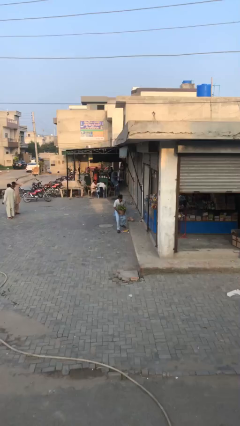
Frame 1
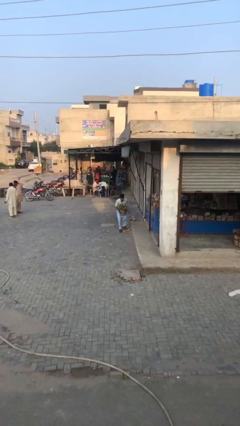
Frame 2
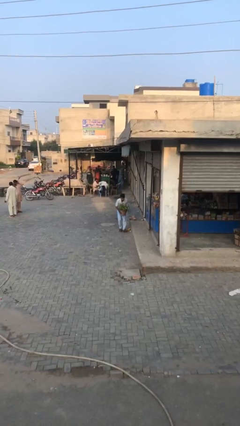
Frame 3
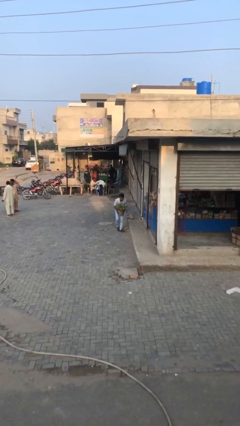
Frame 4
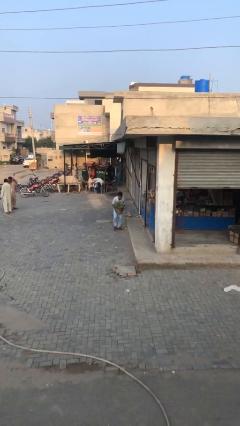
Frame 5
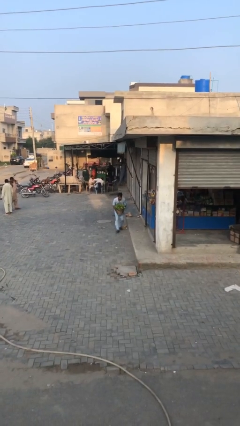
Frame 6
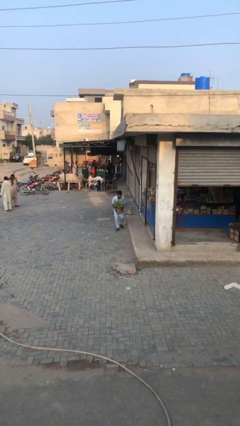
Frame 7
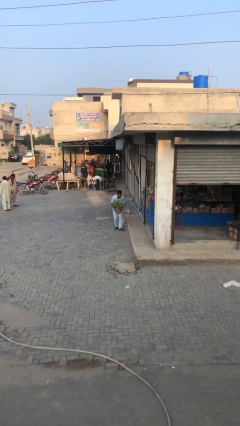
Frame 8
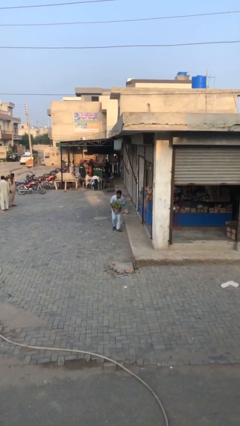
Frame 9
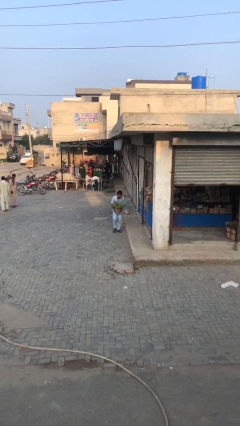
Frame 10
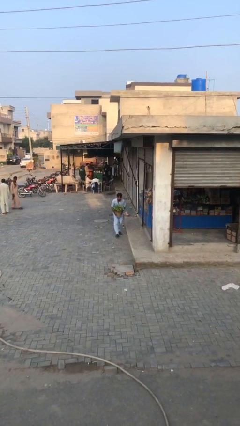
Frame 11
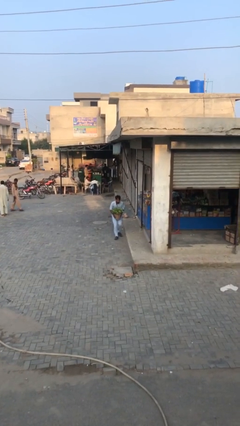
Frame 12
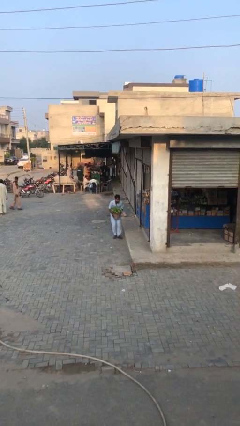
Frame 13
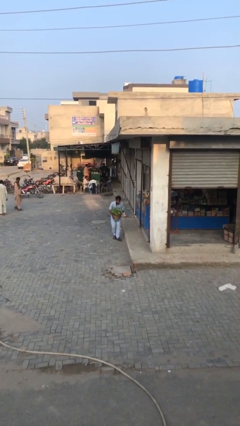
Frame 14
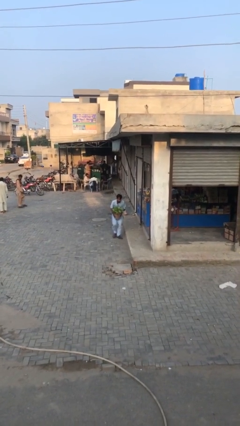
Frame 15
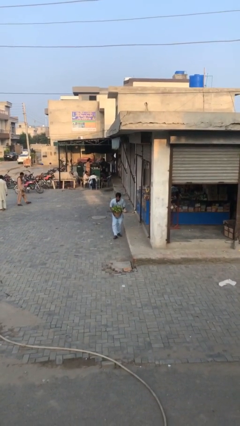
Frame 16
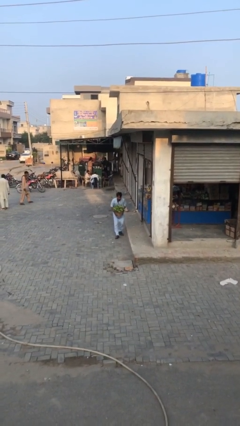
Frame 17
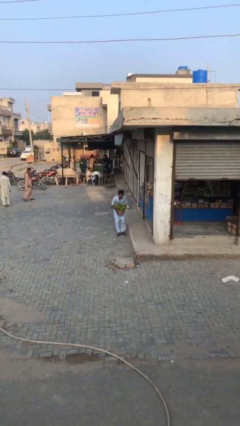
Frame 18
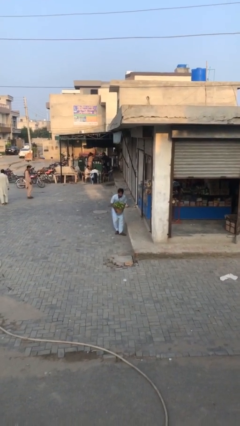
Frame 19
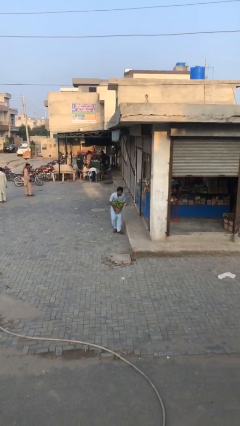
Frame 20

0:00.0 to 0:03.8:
person carries heavy object

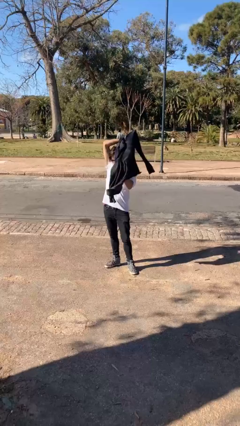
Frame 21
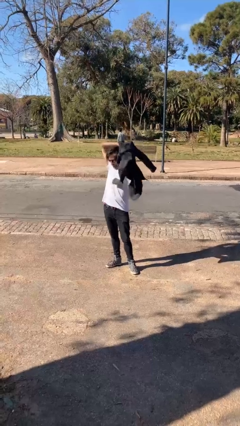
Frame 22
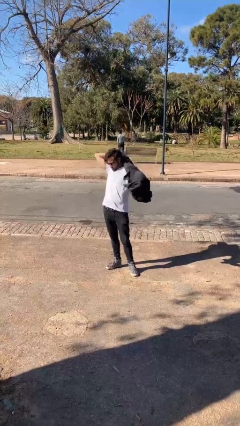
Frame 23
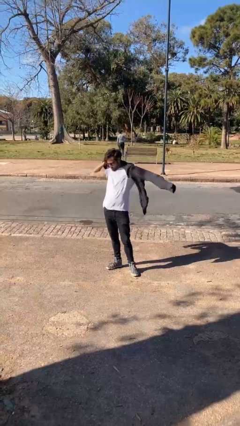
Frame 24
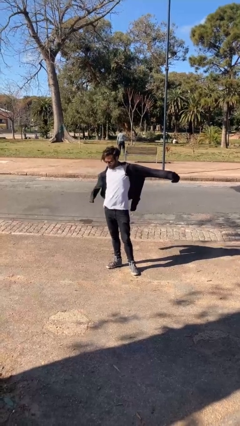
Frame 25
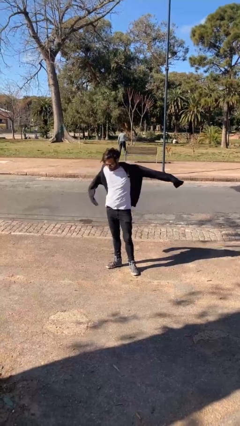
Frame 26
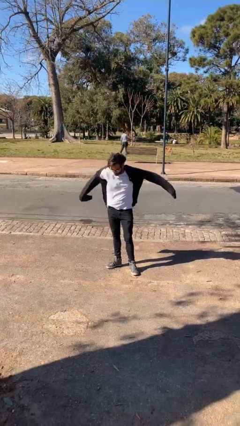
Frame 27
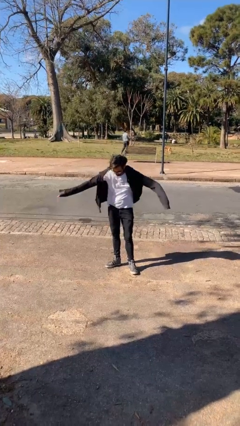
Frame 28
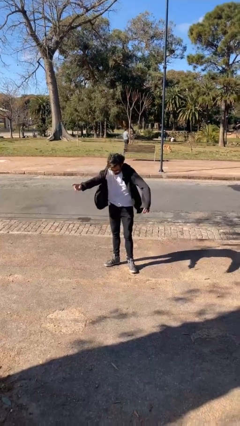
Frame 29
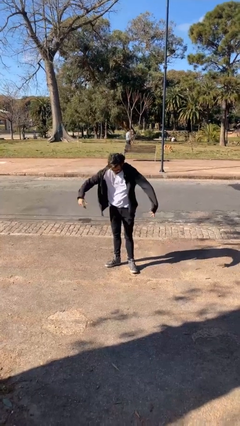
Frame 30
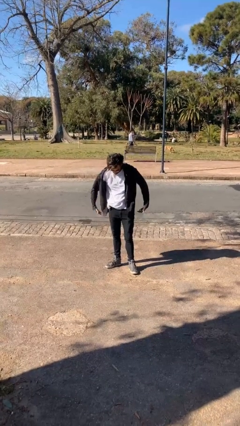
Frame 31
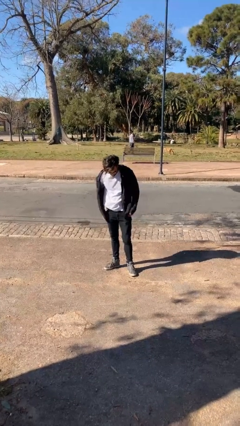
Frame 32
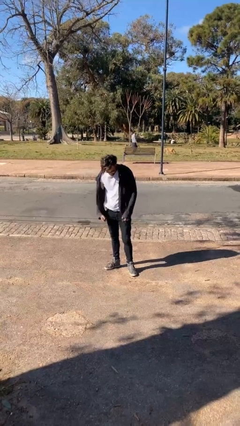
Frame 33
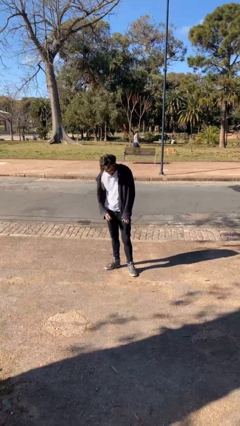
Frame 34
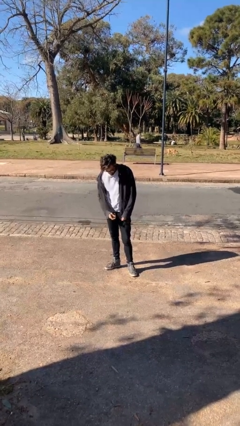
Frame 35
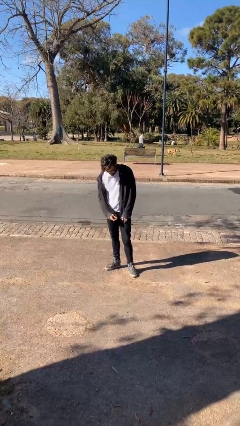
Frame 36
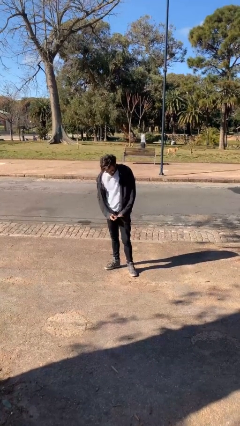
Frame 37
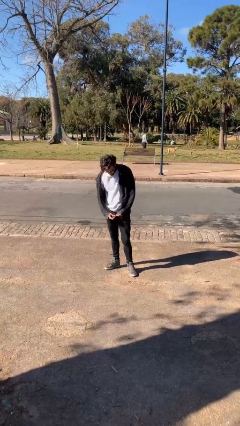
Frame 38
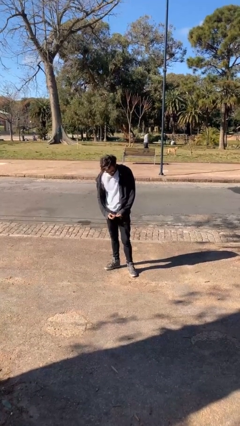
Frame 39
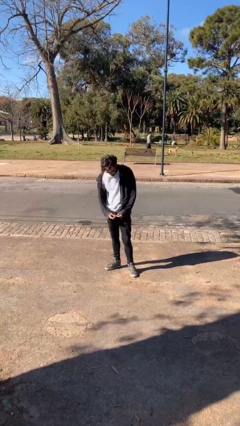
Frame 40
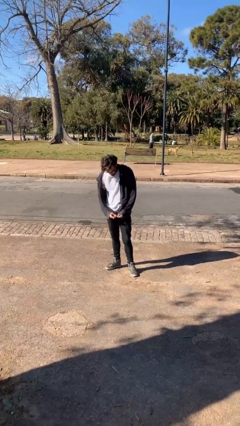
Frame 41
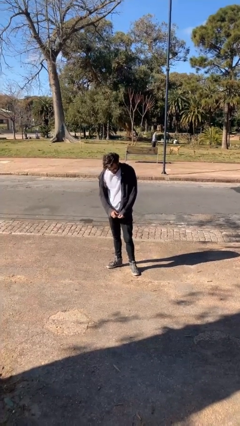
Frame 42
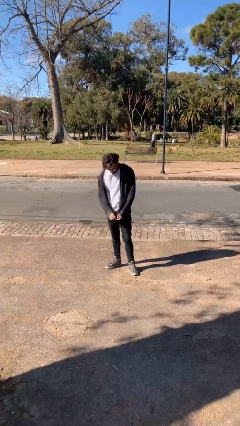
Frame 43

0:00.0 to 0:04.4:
person puts on jacket

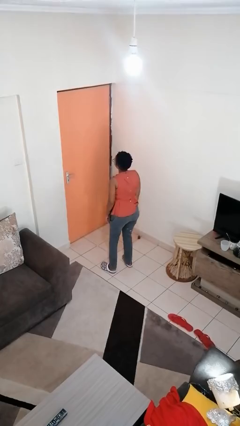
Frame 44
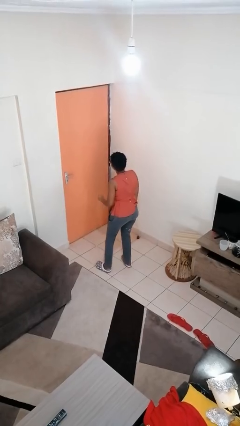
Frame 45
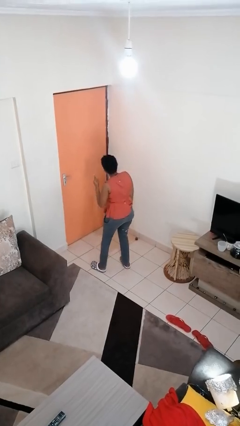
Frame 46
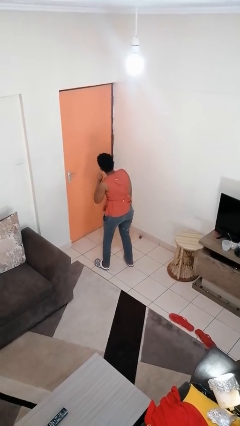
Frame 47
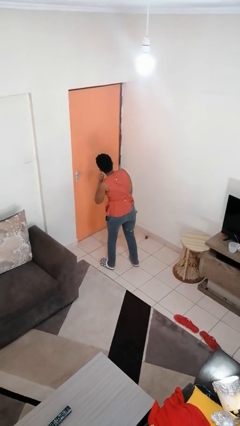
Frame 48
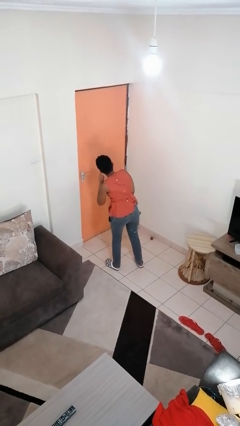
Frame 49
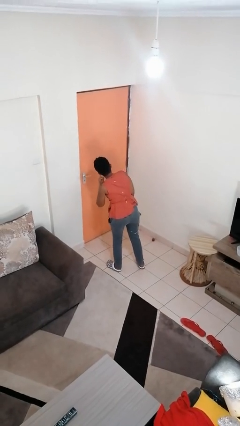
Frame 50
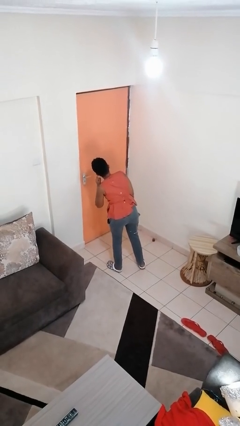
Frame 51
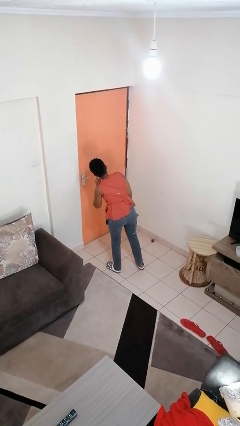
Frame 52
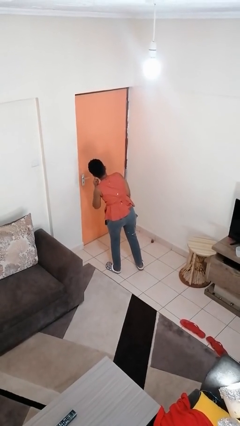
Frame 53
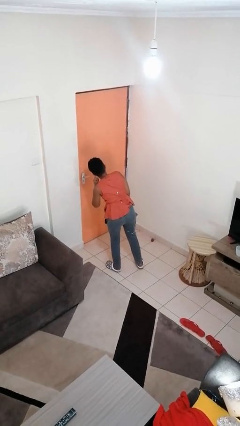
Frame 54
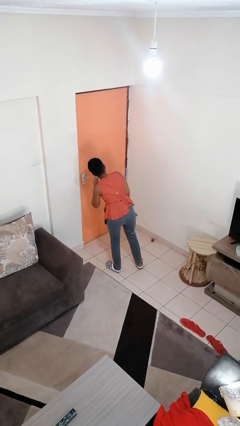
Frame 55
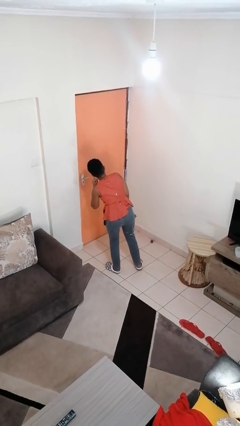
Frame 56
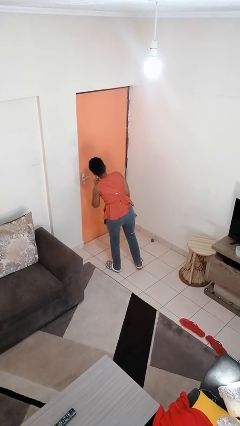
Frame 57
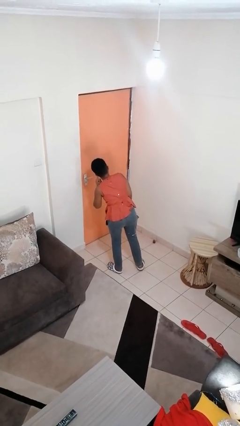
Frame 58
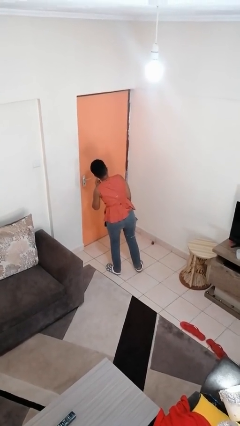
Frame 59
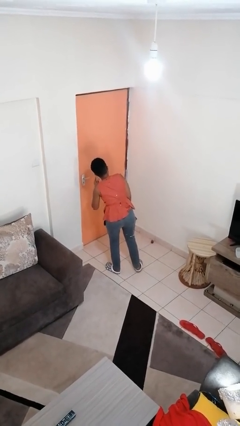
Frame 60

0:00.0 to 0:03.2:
person gestures listen closely

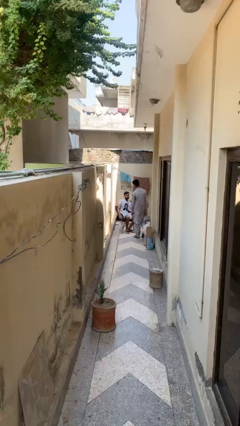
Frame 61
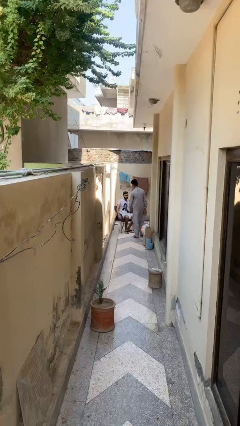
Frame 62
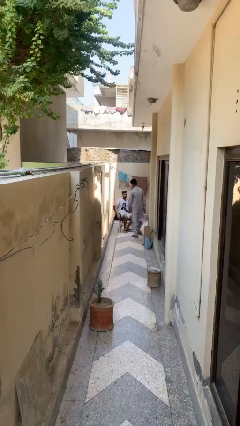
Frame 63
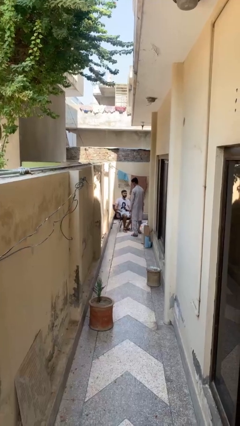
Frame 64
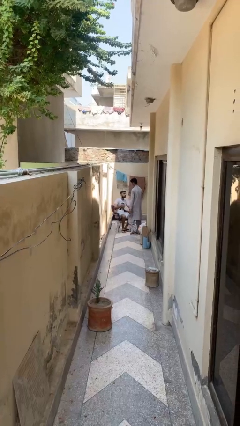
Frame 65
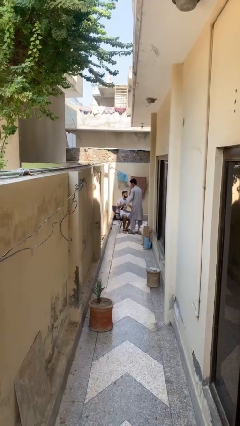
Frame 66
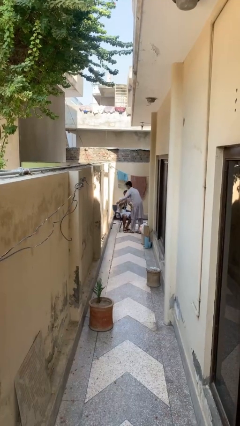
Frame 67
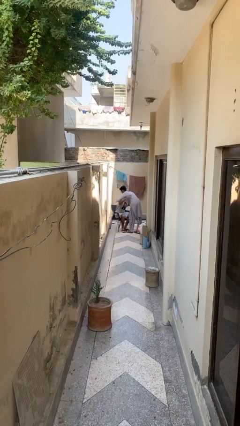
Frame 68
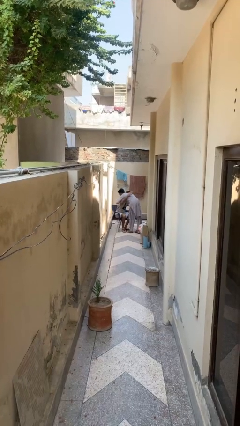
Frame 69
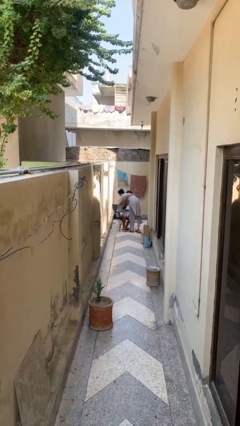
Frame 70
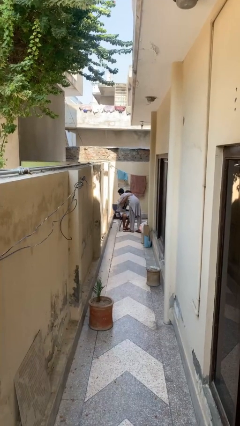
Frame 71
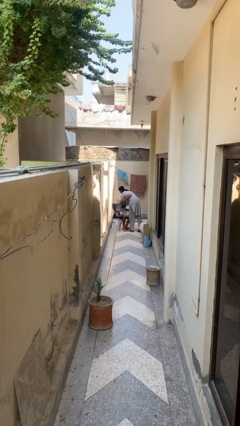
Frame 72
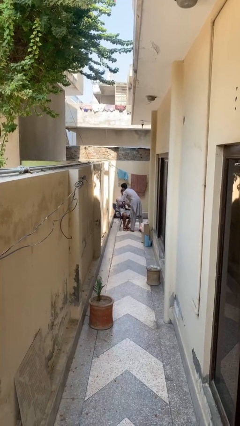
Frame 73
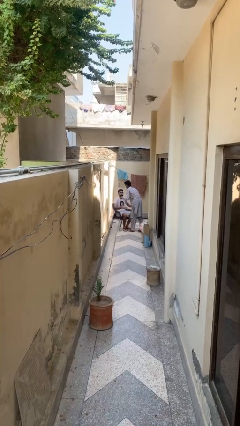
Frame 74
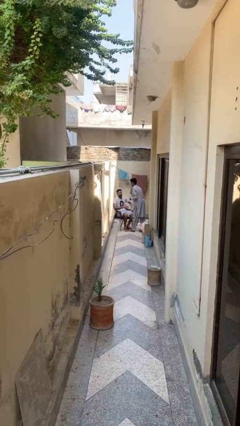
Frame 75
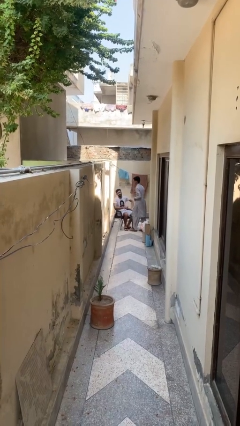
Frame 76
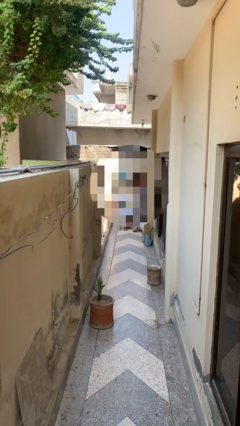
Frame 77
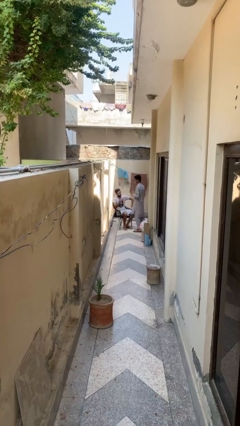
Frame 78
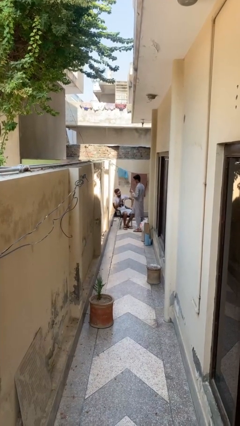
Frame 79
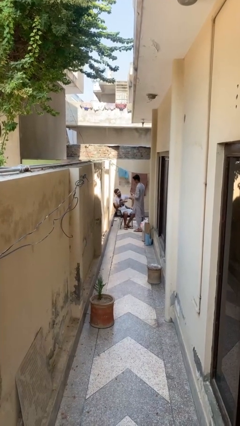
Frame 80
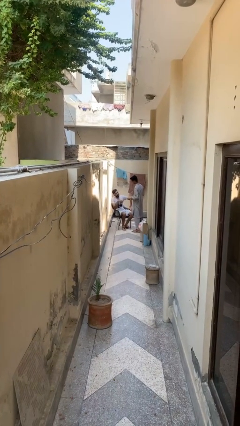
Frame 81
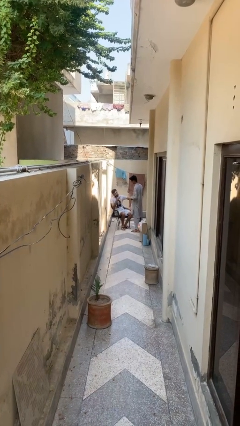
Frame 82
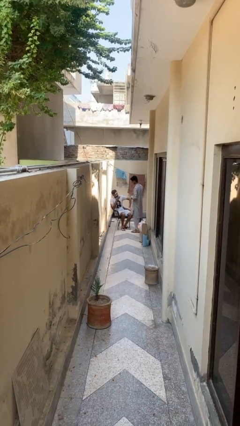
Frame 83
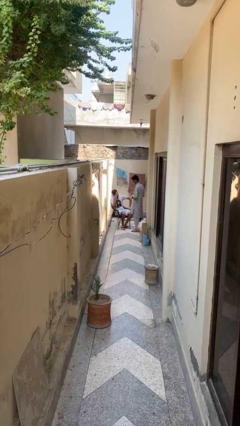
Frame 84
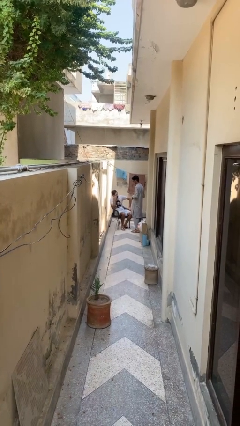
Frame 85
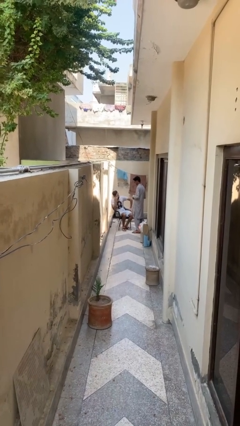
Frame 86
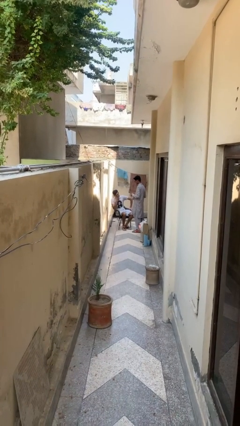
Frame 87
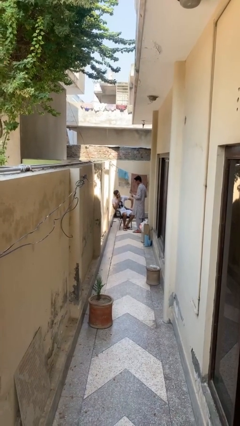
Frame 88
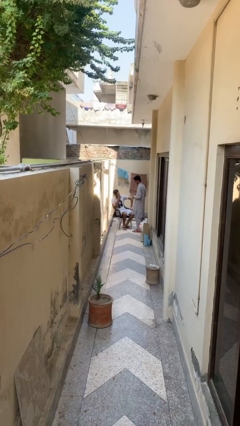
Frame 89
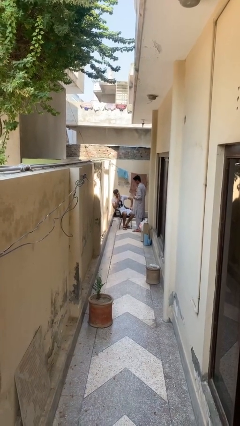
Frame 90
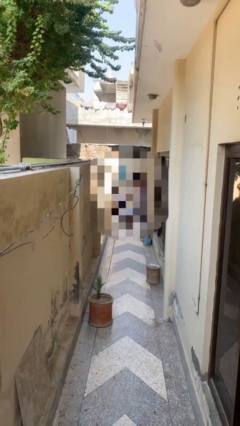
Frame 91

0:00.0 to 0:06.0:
person embraces person
